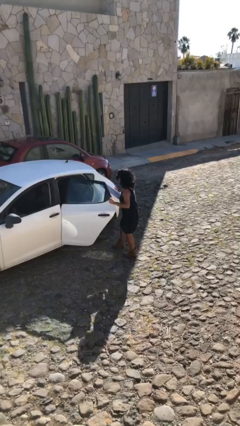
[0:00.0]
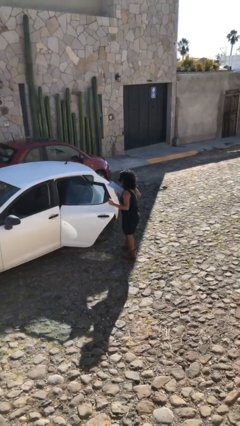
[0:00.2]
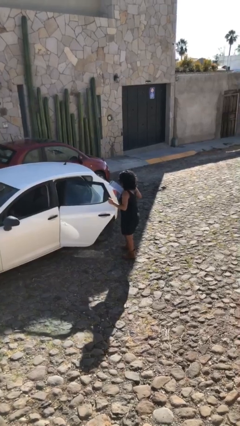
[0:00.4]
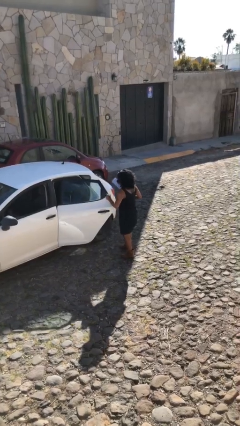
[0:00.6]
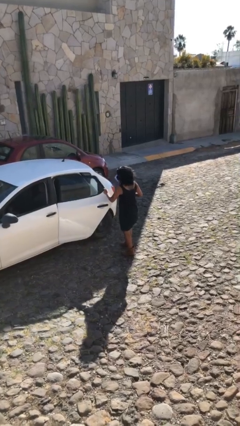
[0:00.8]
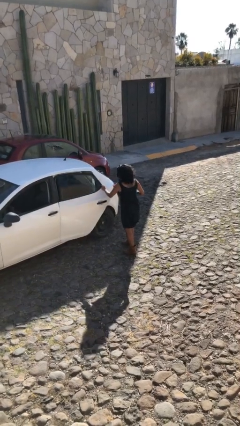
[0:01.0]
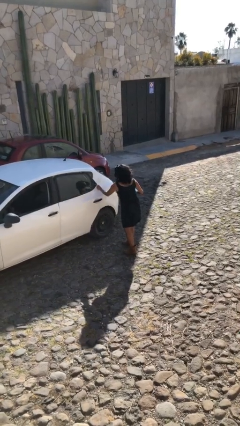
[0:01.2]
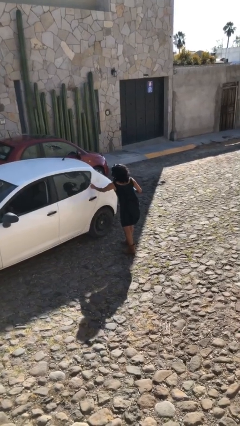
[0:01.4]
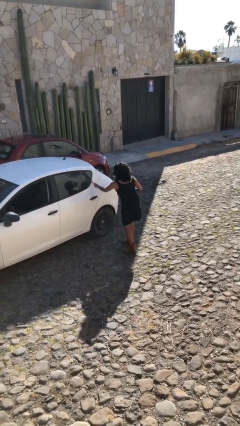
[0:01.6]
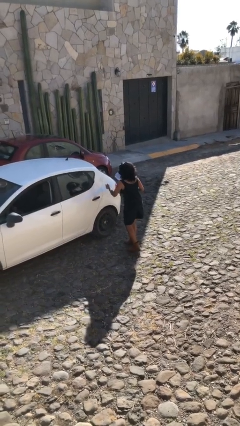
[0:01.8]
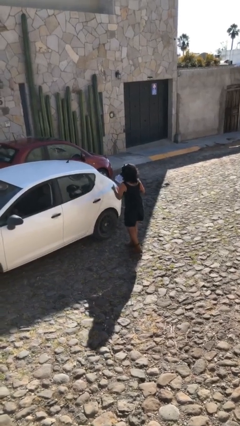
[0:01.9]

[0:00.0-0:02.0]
person closes car door

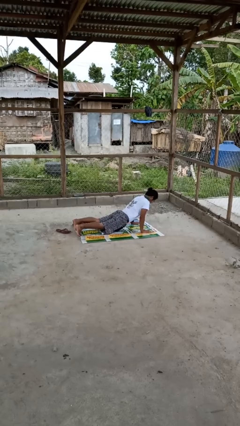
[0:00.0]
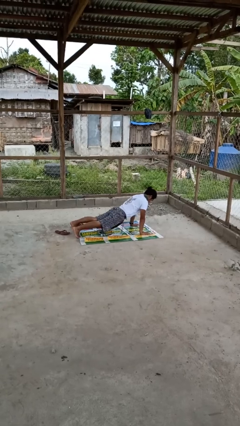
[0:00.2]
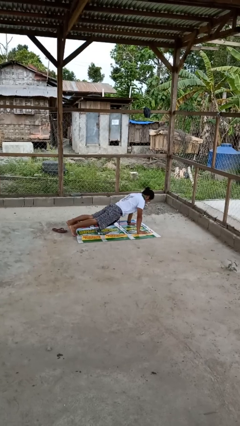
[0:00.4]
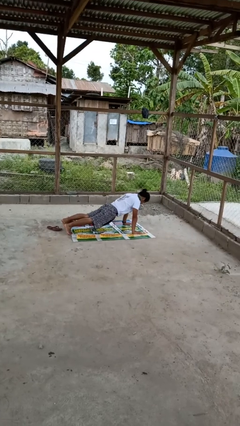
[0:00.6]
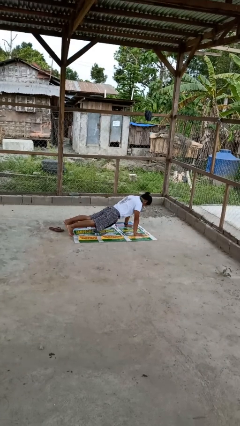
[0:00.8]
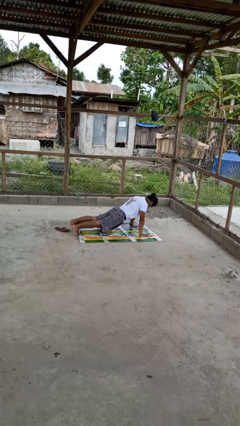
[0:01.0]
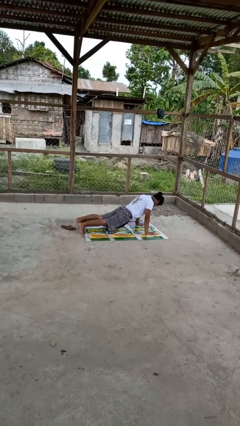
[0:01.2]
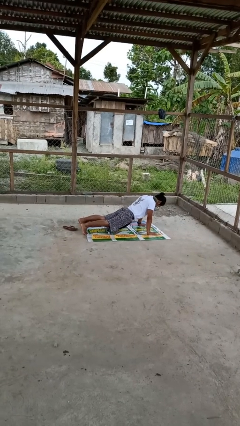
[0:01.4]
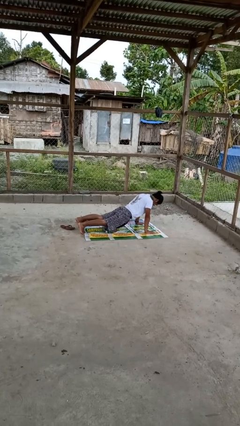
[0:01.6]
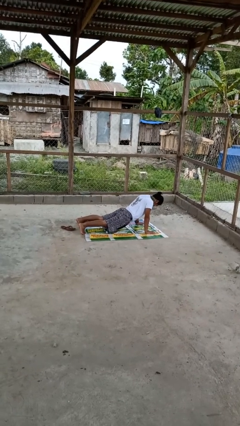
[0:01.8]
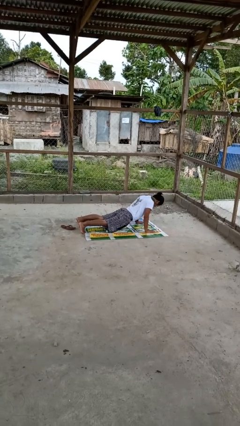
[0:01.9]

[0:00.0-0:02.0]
person exercises with pushup

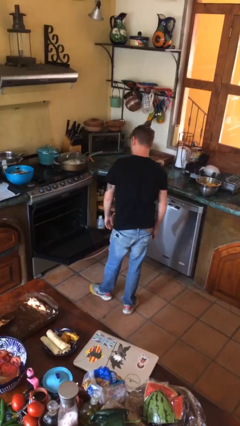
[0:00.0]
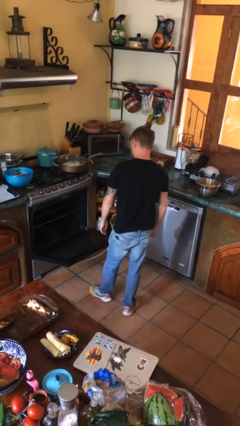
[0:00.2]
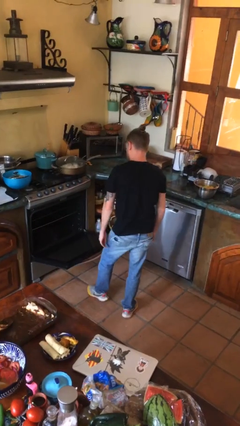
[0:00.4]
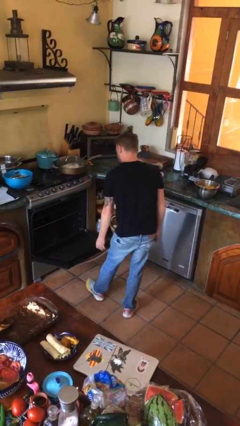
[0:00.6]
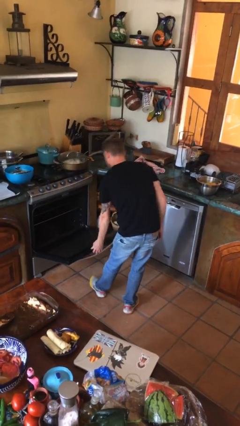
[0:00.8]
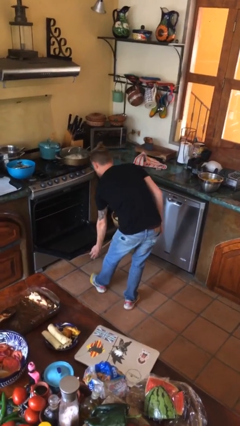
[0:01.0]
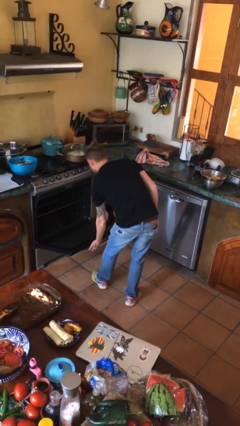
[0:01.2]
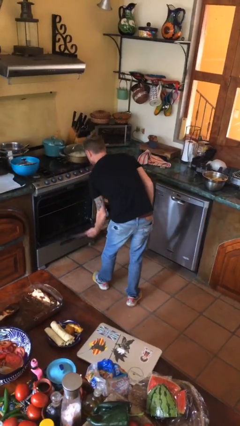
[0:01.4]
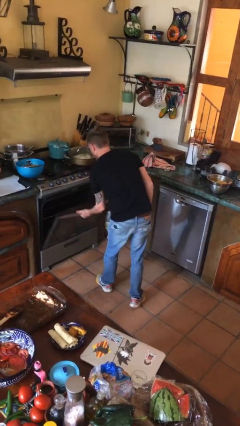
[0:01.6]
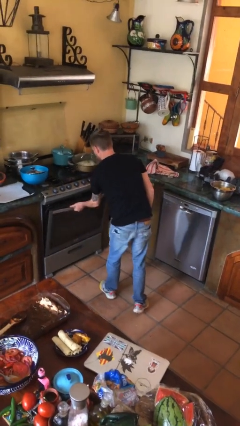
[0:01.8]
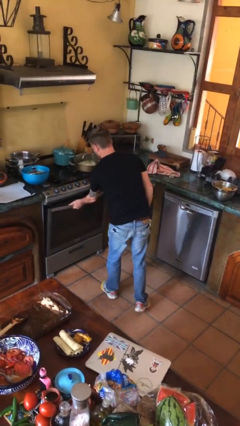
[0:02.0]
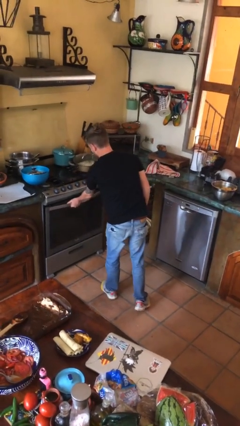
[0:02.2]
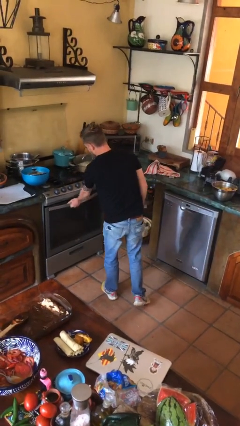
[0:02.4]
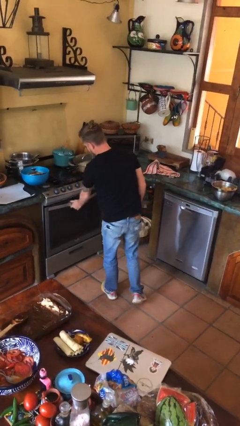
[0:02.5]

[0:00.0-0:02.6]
person closes oven door

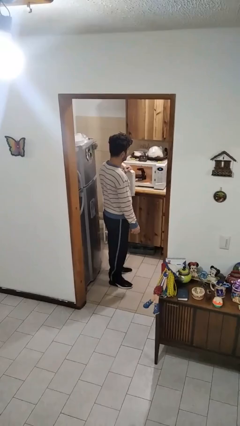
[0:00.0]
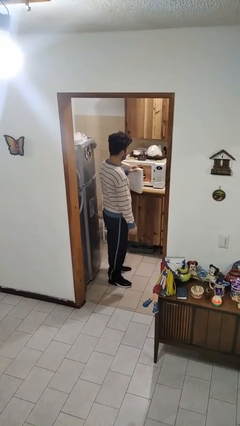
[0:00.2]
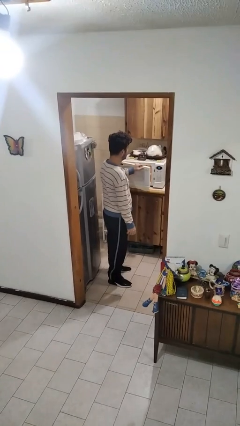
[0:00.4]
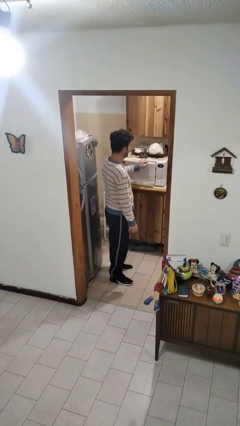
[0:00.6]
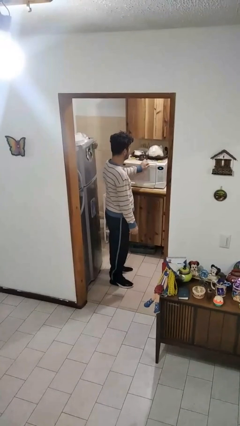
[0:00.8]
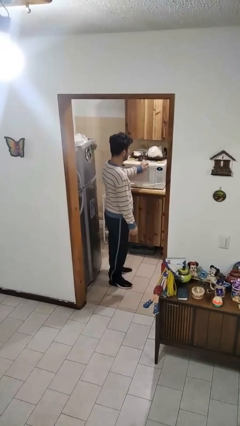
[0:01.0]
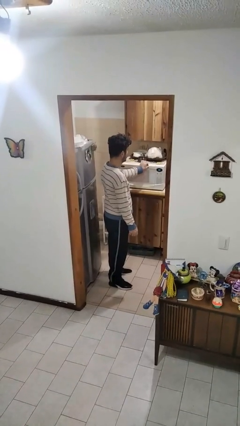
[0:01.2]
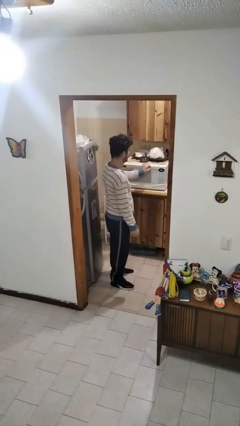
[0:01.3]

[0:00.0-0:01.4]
person closes microwave

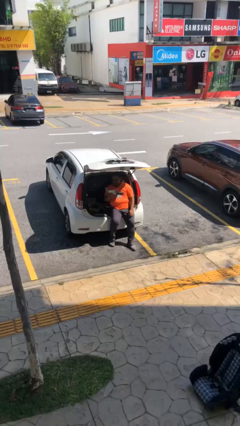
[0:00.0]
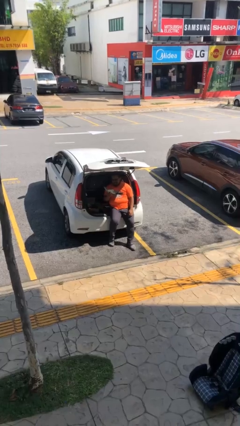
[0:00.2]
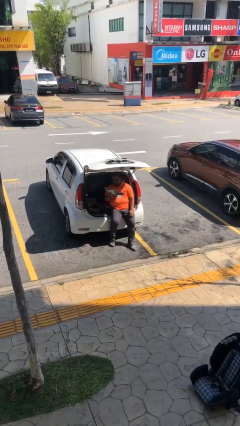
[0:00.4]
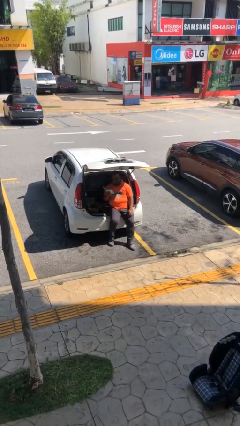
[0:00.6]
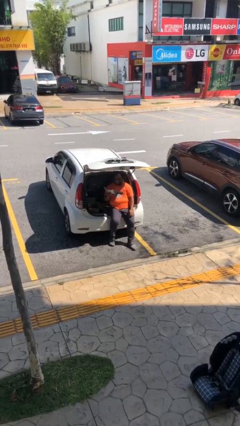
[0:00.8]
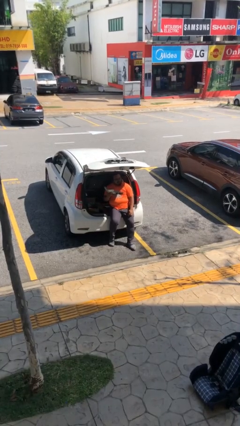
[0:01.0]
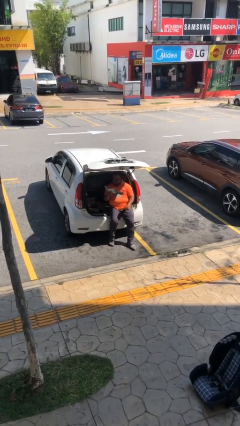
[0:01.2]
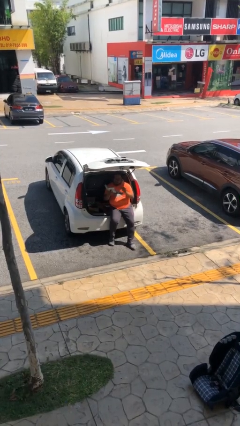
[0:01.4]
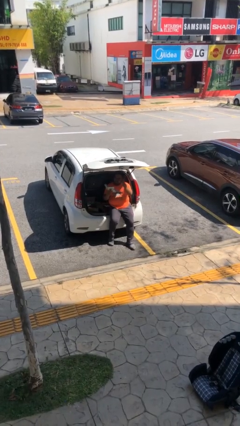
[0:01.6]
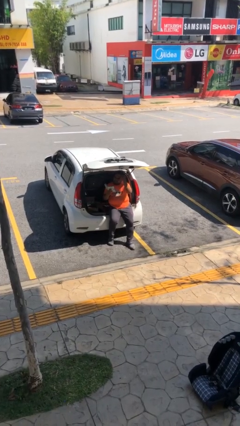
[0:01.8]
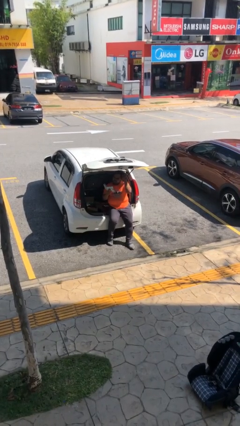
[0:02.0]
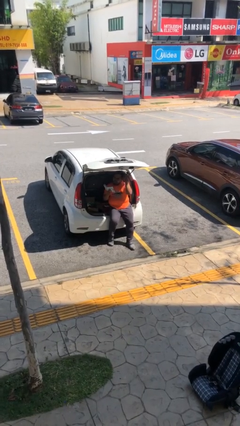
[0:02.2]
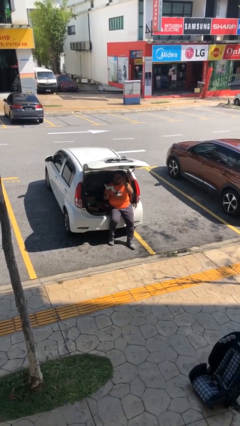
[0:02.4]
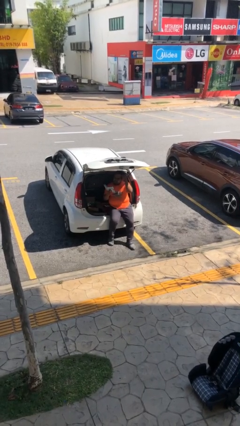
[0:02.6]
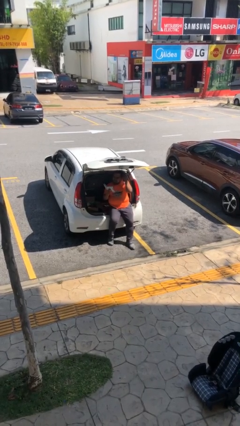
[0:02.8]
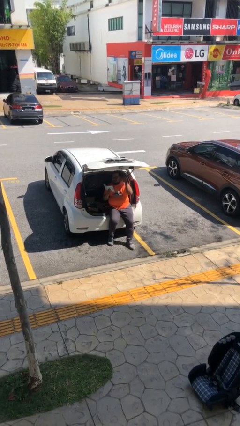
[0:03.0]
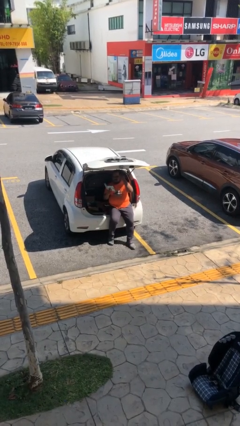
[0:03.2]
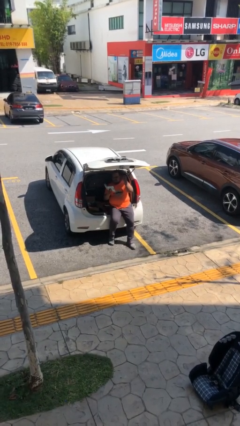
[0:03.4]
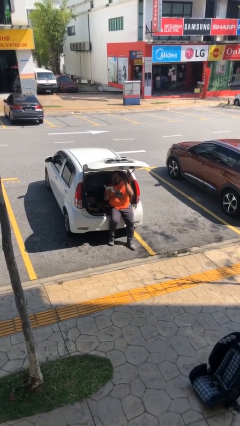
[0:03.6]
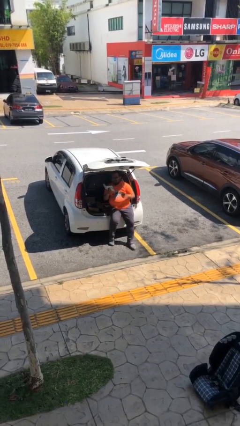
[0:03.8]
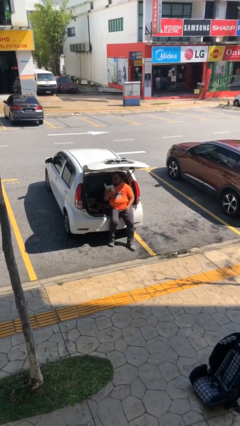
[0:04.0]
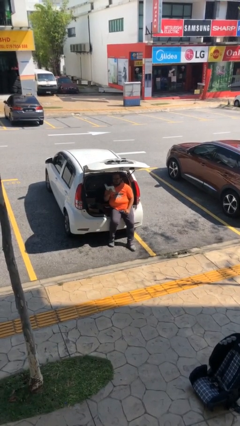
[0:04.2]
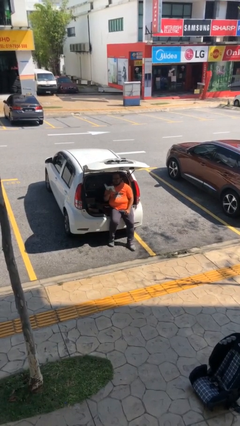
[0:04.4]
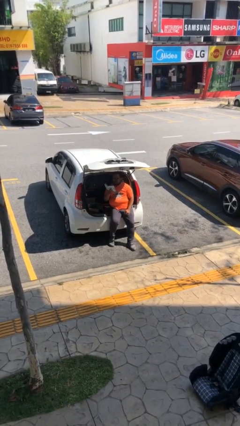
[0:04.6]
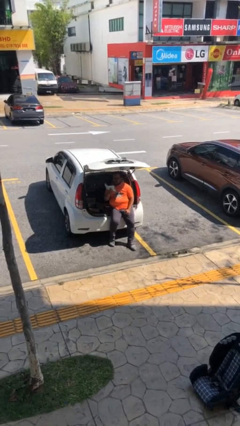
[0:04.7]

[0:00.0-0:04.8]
person reads document

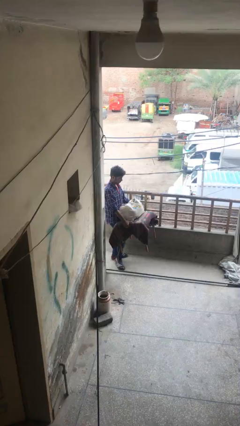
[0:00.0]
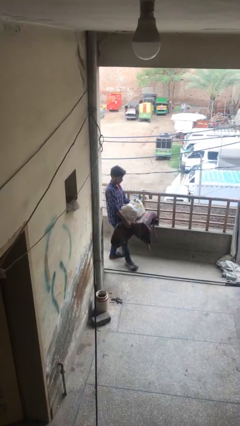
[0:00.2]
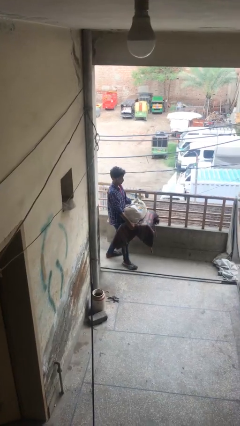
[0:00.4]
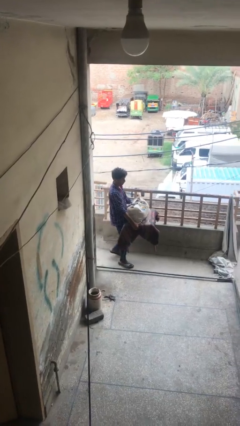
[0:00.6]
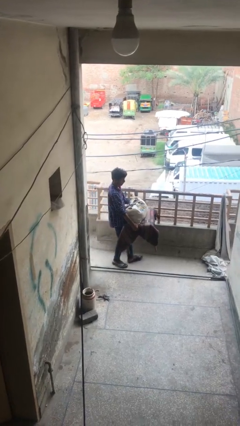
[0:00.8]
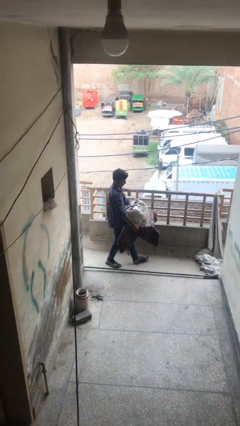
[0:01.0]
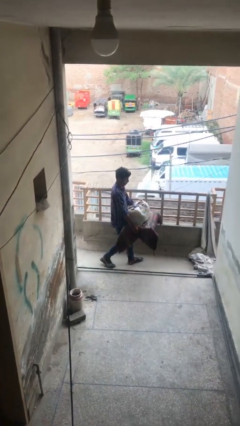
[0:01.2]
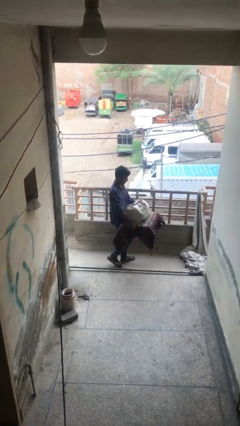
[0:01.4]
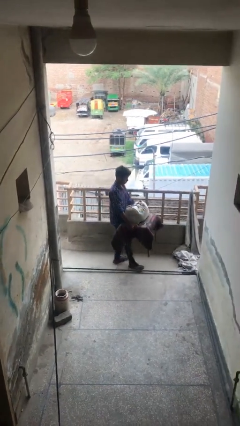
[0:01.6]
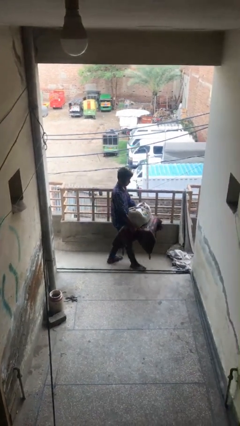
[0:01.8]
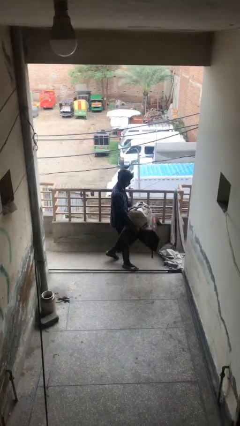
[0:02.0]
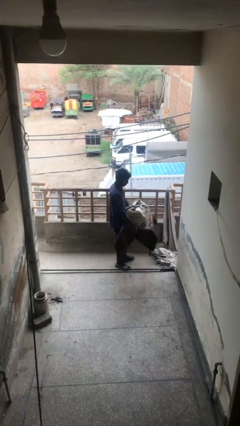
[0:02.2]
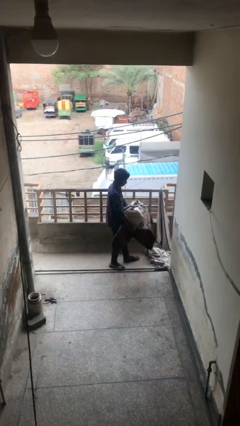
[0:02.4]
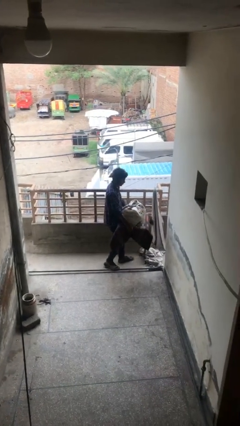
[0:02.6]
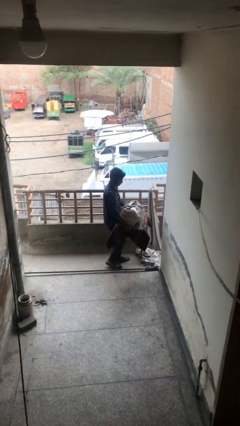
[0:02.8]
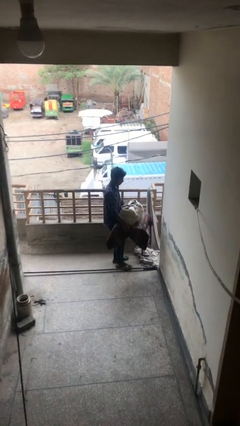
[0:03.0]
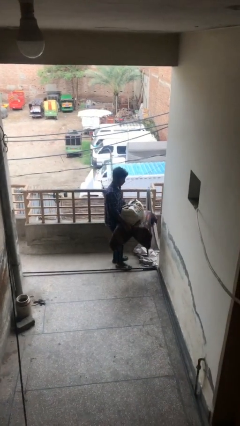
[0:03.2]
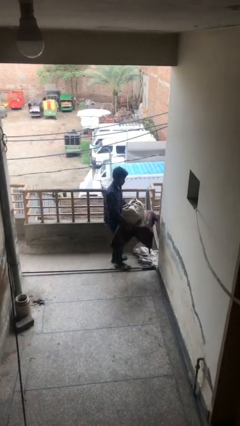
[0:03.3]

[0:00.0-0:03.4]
person carries heavy object

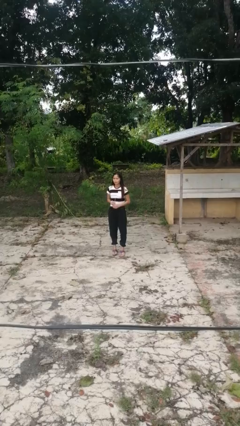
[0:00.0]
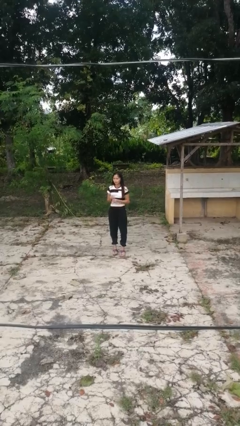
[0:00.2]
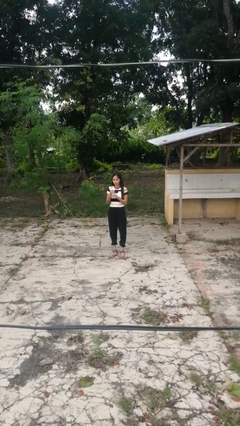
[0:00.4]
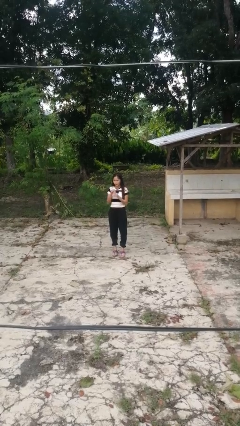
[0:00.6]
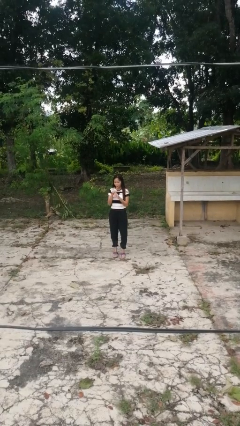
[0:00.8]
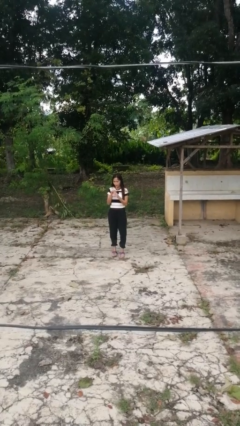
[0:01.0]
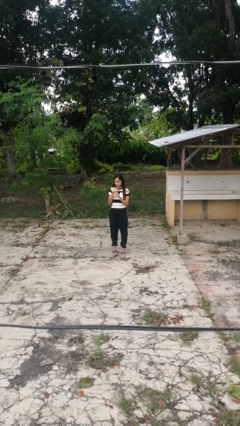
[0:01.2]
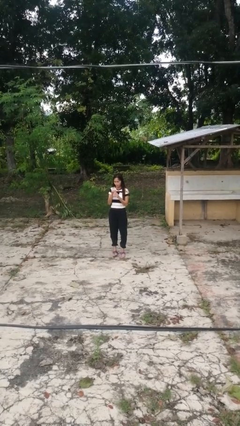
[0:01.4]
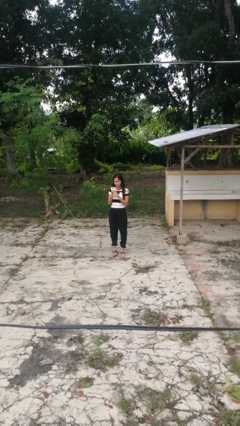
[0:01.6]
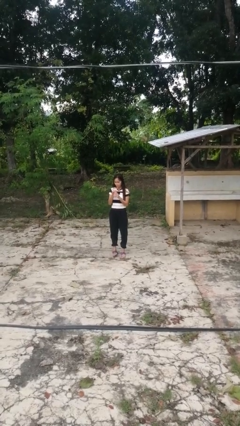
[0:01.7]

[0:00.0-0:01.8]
person drinks from straw
